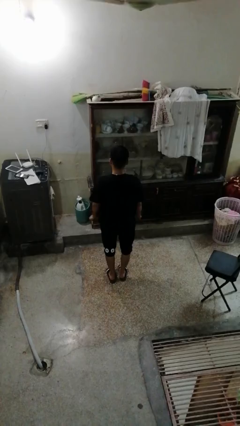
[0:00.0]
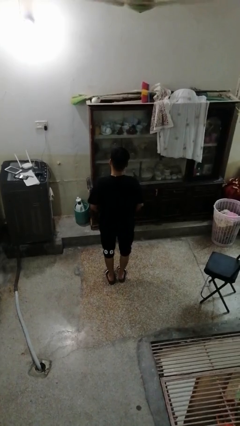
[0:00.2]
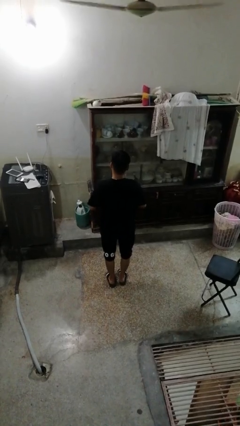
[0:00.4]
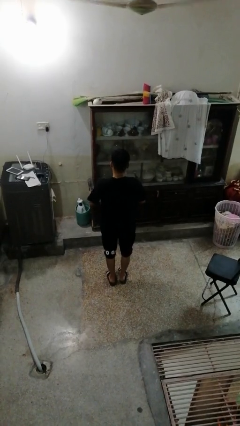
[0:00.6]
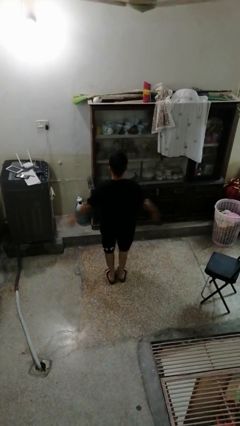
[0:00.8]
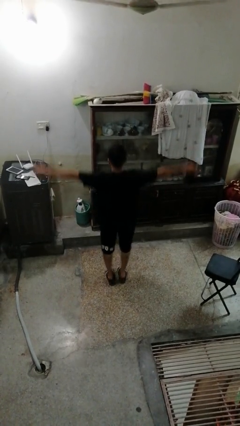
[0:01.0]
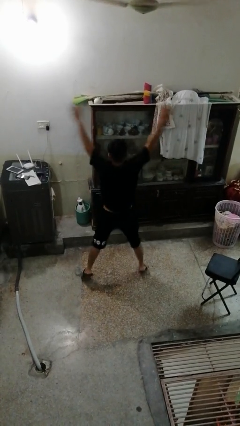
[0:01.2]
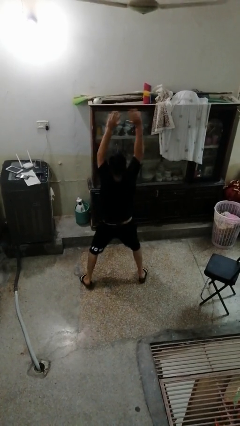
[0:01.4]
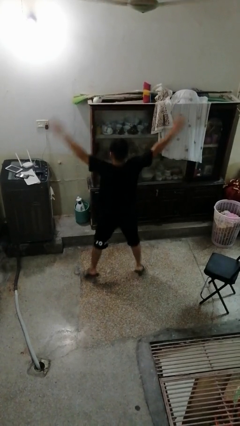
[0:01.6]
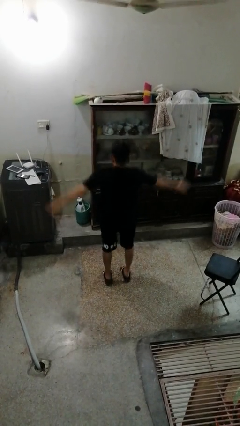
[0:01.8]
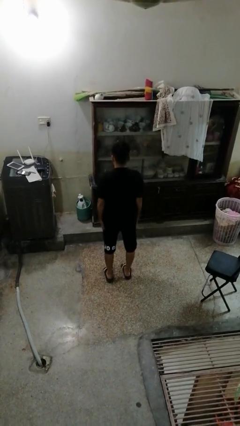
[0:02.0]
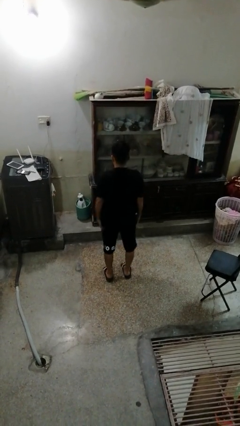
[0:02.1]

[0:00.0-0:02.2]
person exercises with jumping jacks

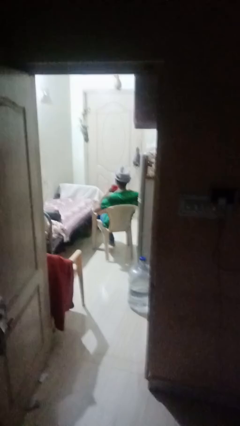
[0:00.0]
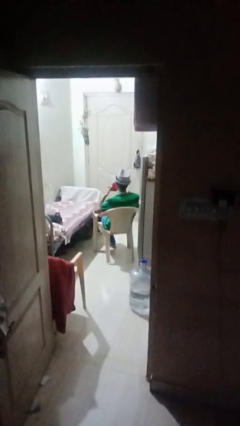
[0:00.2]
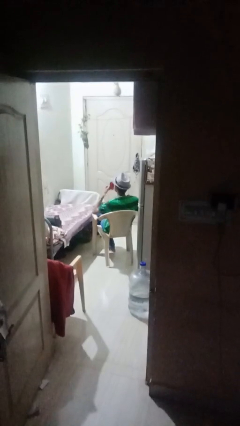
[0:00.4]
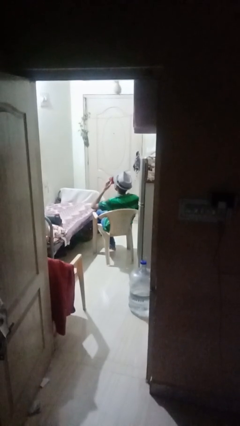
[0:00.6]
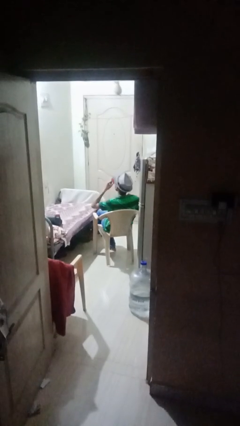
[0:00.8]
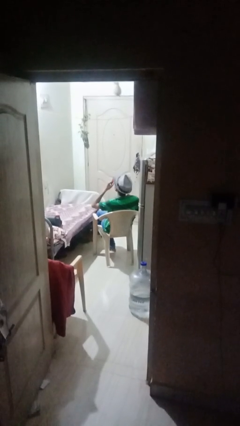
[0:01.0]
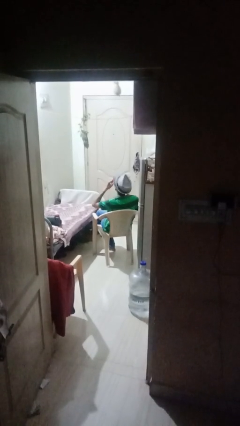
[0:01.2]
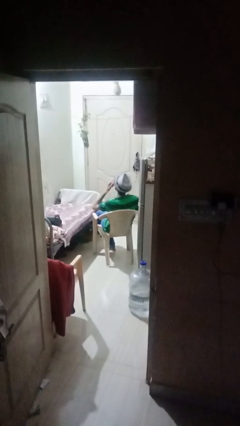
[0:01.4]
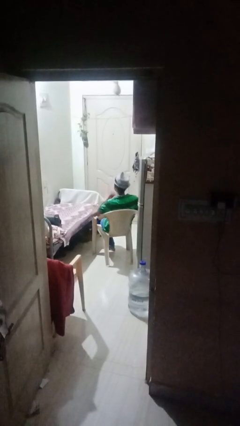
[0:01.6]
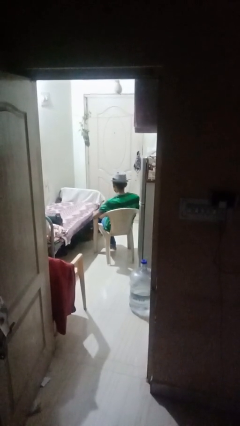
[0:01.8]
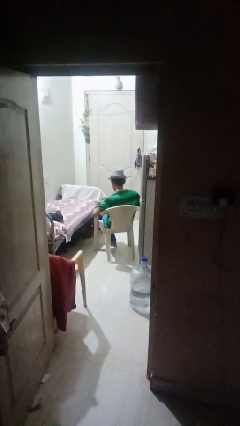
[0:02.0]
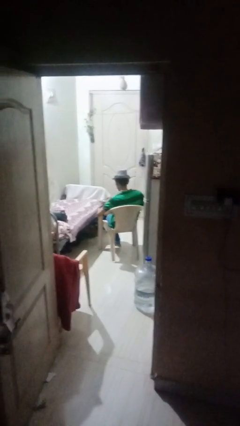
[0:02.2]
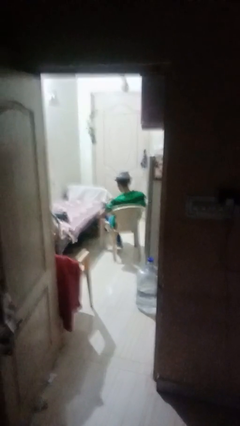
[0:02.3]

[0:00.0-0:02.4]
person drinks from mug

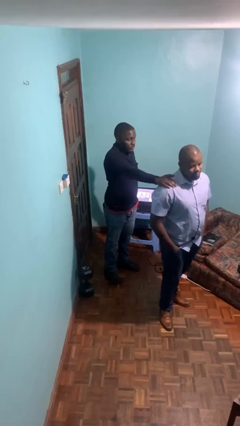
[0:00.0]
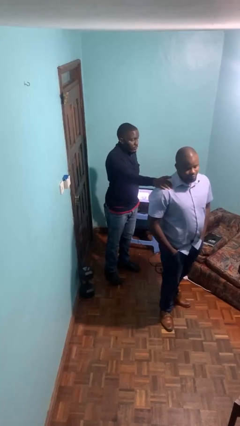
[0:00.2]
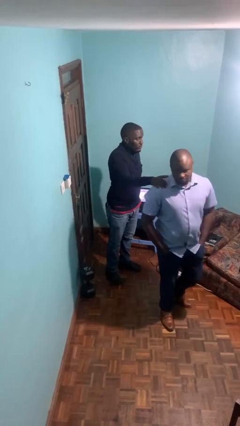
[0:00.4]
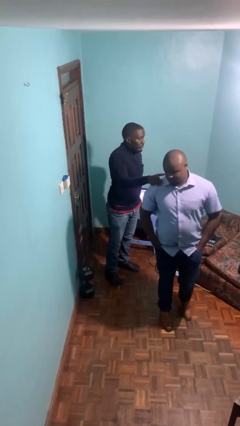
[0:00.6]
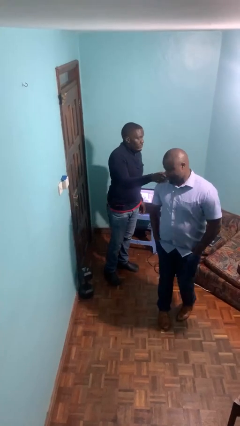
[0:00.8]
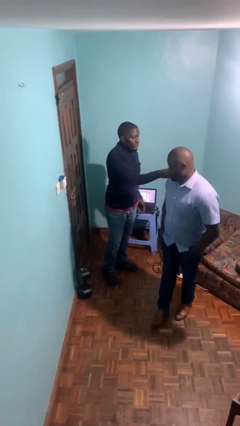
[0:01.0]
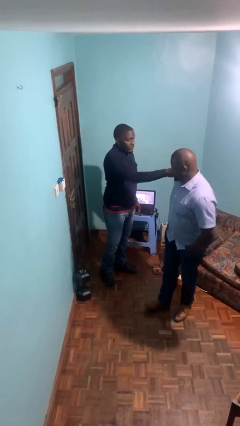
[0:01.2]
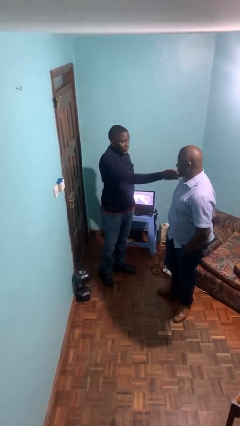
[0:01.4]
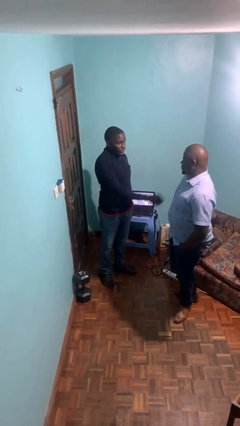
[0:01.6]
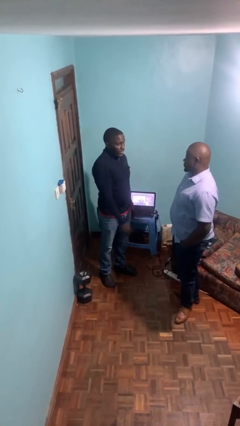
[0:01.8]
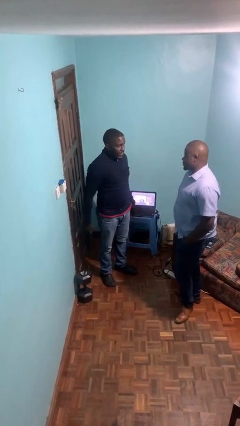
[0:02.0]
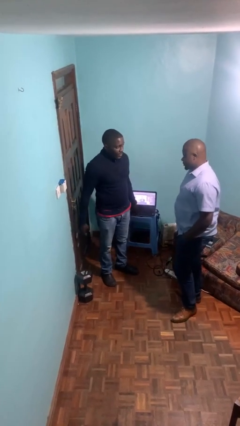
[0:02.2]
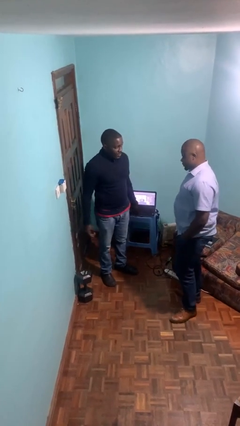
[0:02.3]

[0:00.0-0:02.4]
person spins person around

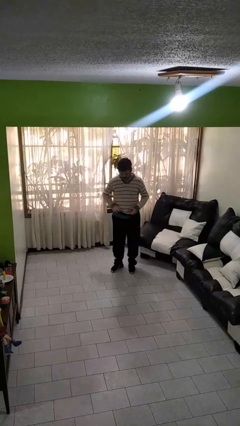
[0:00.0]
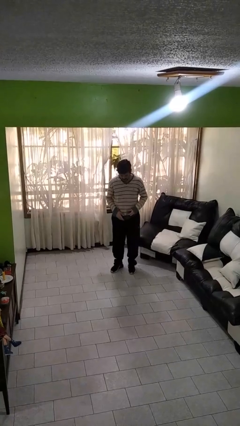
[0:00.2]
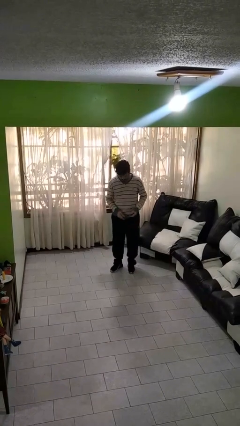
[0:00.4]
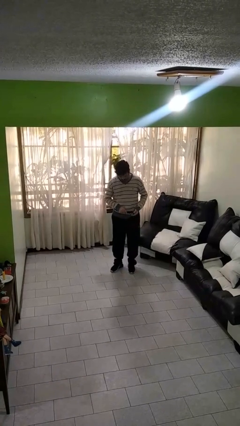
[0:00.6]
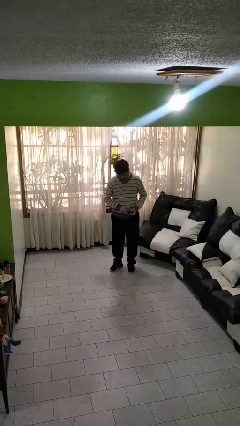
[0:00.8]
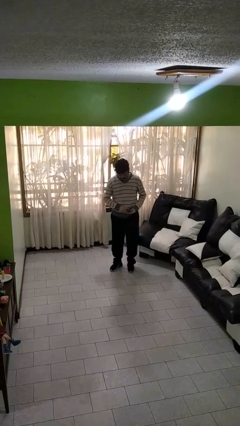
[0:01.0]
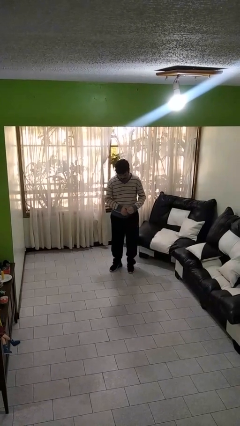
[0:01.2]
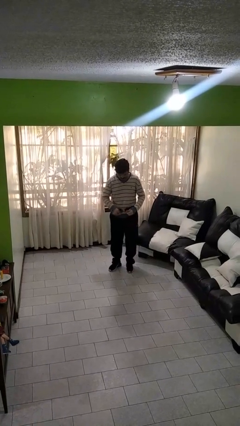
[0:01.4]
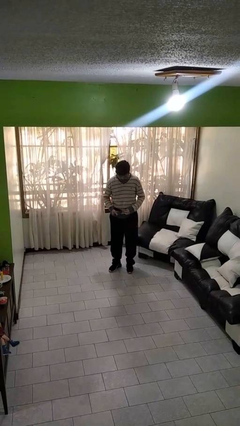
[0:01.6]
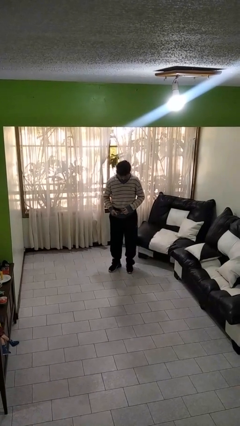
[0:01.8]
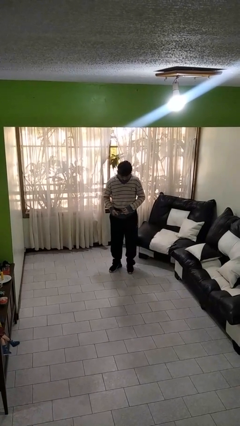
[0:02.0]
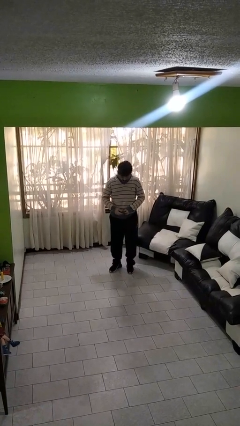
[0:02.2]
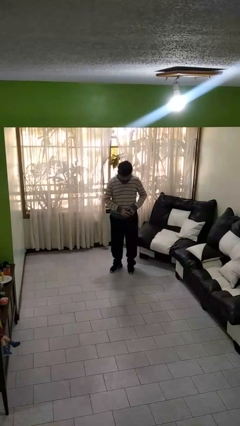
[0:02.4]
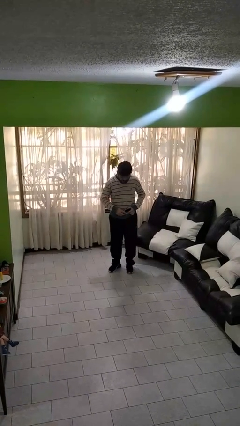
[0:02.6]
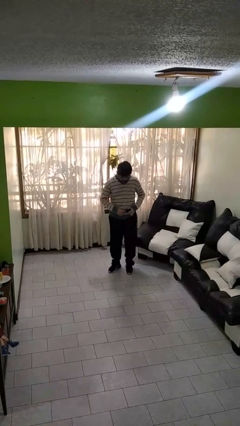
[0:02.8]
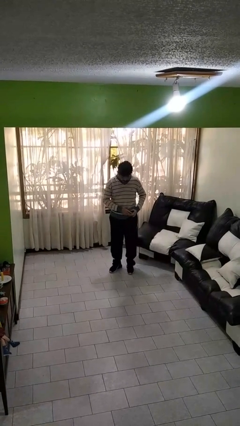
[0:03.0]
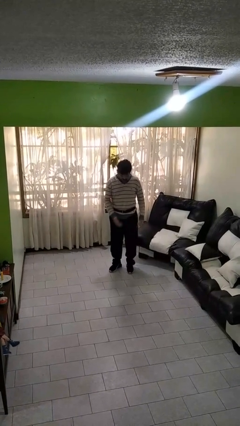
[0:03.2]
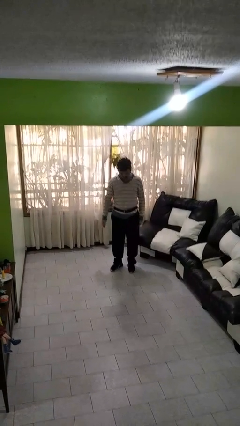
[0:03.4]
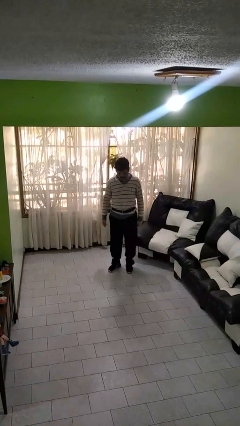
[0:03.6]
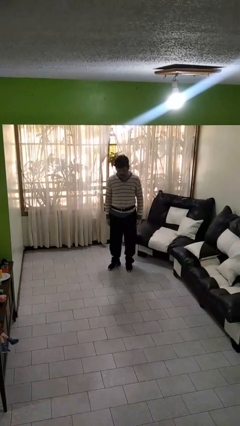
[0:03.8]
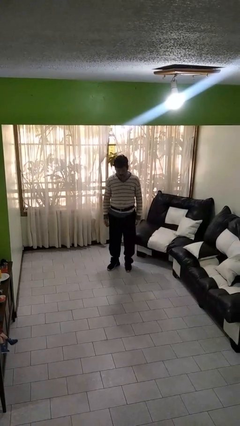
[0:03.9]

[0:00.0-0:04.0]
person puts on belt

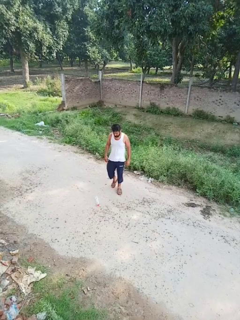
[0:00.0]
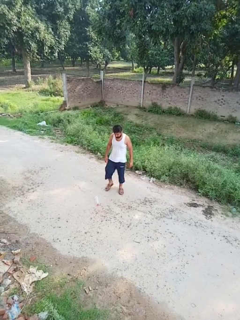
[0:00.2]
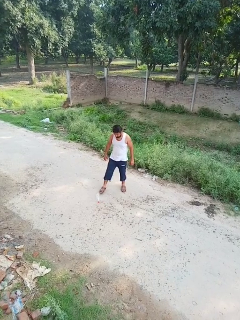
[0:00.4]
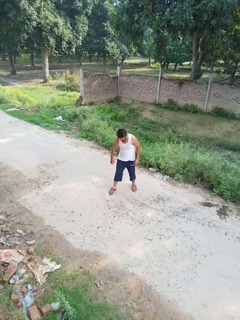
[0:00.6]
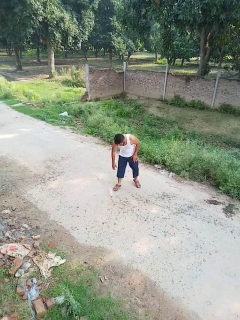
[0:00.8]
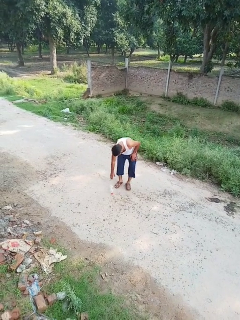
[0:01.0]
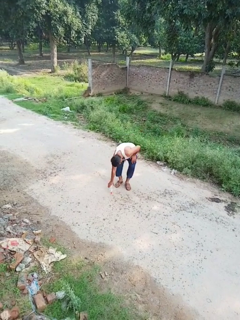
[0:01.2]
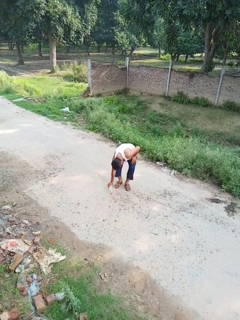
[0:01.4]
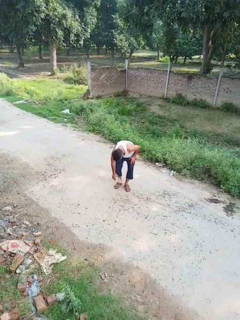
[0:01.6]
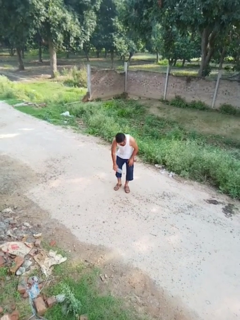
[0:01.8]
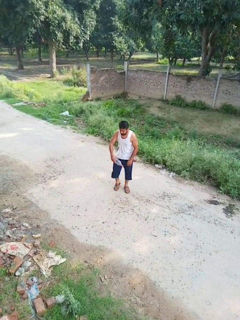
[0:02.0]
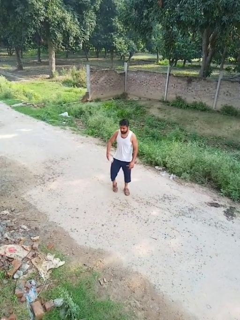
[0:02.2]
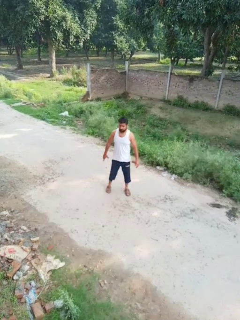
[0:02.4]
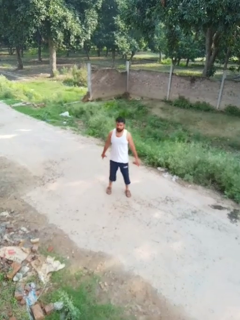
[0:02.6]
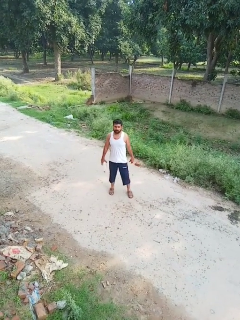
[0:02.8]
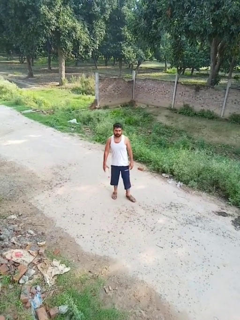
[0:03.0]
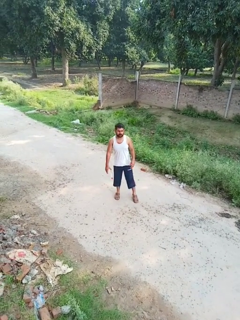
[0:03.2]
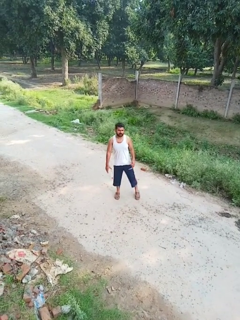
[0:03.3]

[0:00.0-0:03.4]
person picks up object from floor

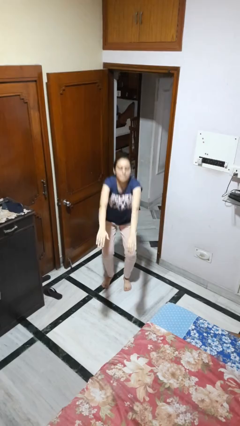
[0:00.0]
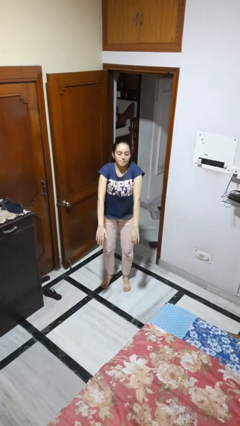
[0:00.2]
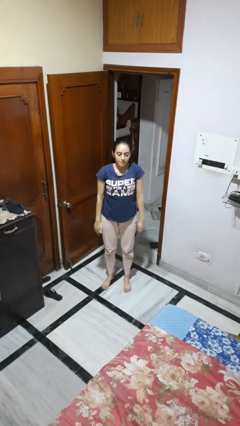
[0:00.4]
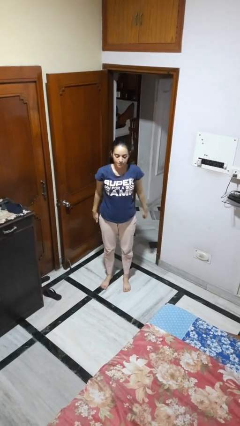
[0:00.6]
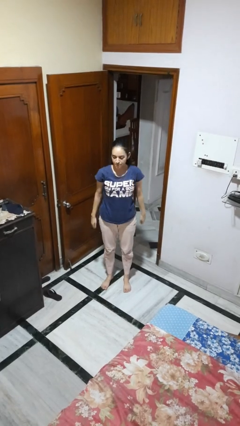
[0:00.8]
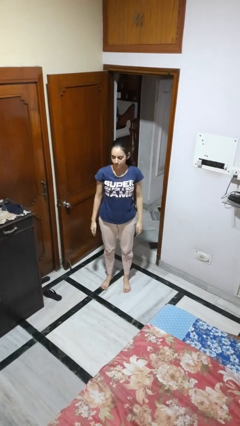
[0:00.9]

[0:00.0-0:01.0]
person stands up

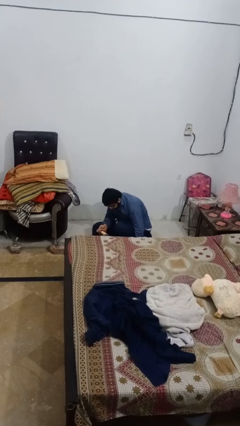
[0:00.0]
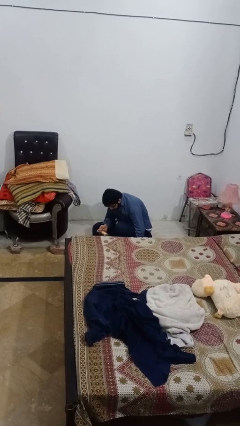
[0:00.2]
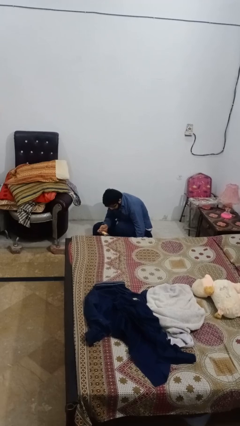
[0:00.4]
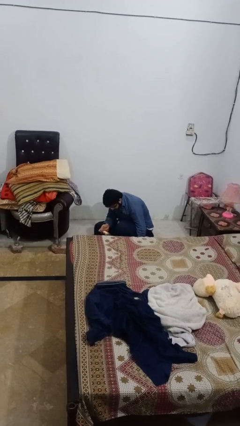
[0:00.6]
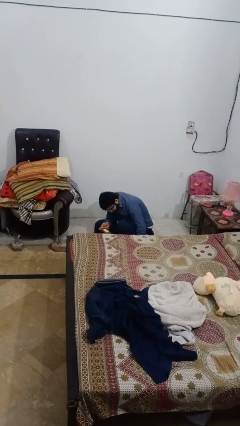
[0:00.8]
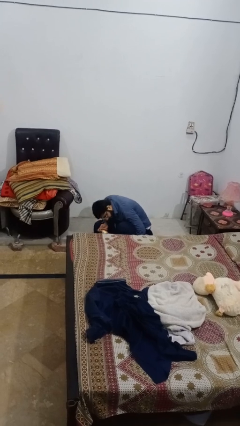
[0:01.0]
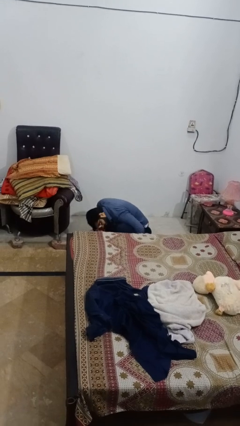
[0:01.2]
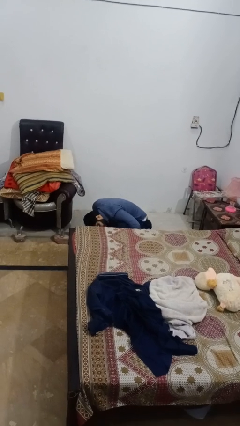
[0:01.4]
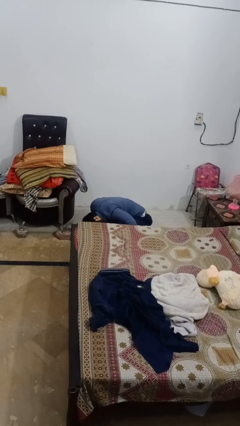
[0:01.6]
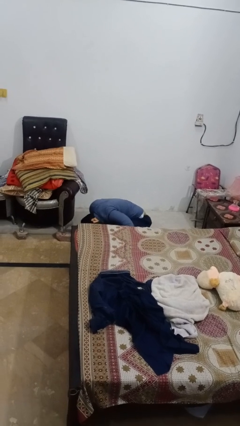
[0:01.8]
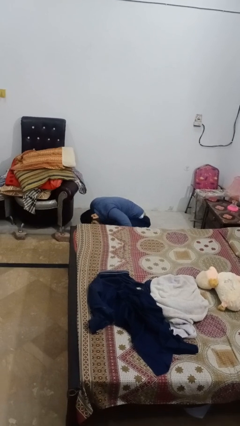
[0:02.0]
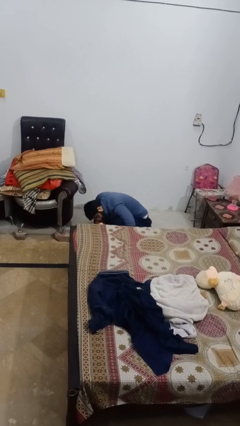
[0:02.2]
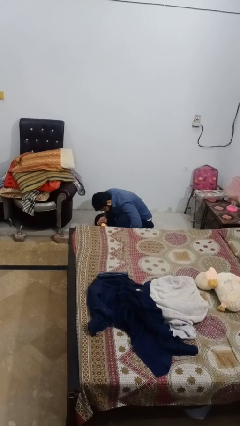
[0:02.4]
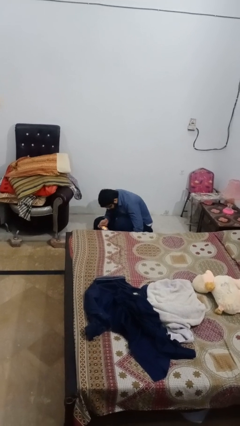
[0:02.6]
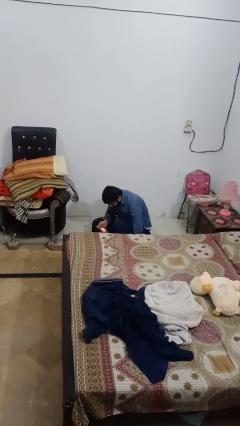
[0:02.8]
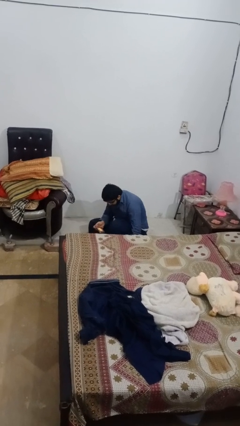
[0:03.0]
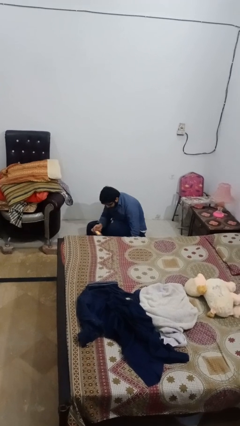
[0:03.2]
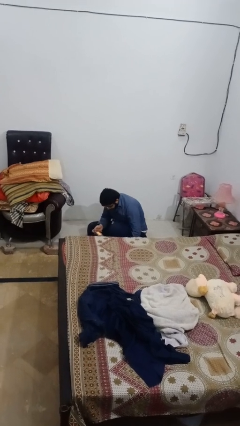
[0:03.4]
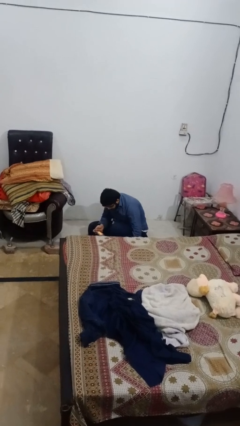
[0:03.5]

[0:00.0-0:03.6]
person searches under bed
